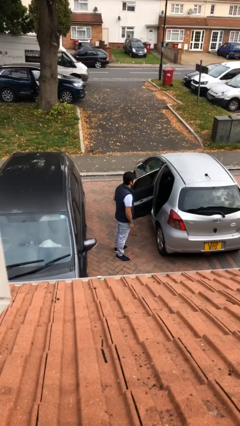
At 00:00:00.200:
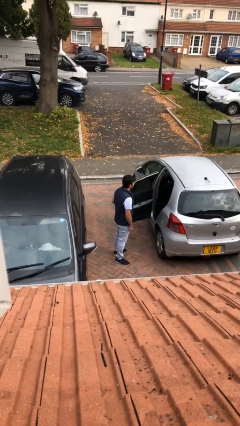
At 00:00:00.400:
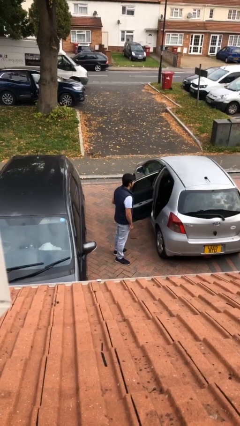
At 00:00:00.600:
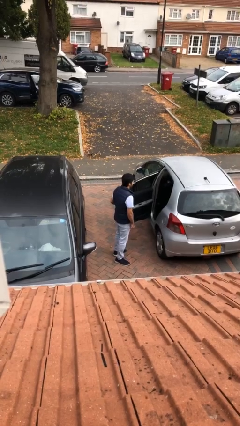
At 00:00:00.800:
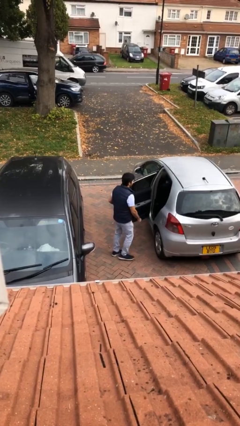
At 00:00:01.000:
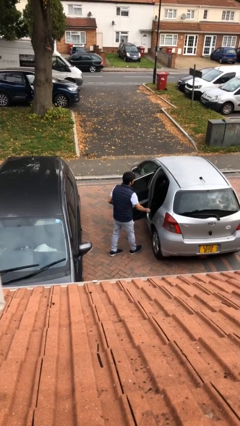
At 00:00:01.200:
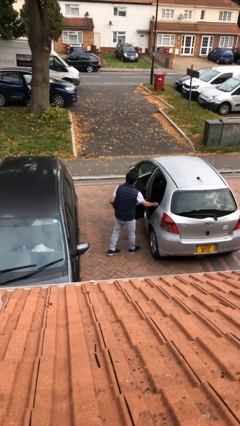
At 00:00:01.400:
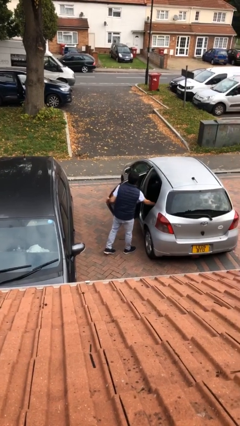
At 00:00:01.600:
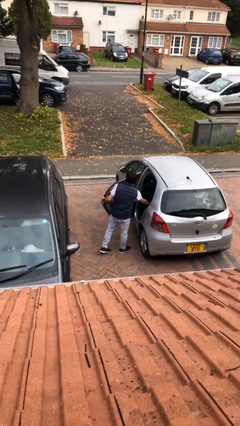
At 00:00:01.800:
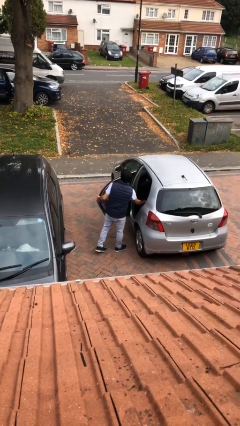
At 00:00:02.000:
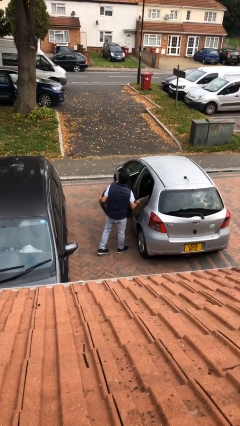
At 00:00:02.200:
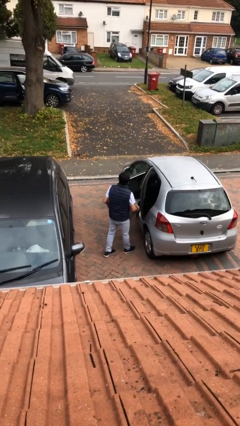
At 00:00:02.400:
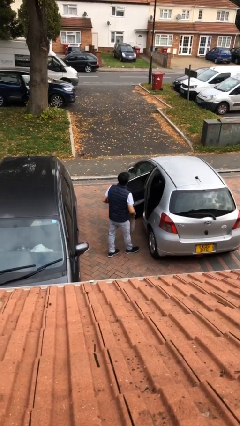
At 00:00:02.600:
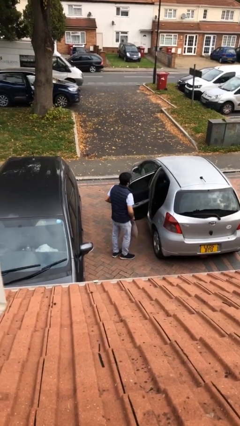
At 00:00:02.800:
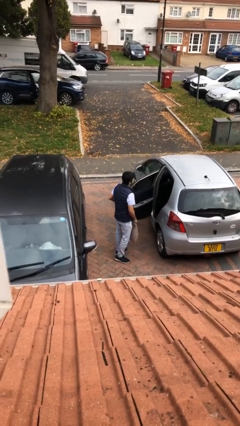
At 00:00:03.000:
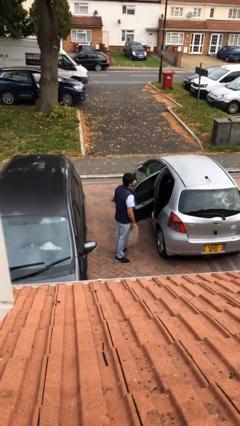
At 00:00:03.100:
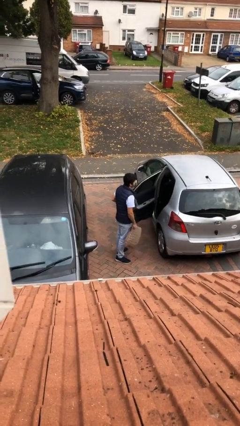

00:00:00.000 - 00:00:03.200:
person unloads car

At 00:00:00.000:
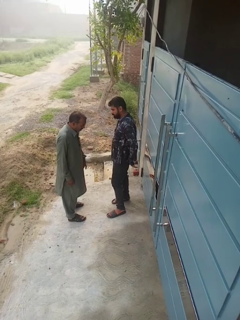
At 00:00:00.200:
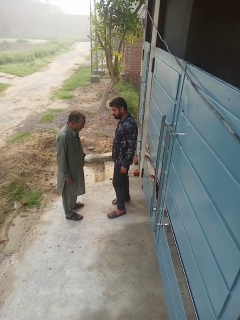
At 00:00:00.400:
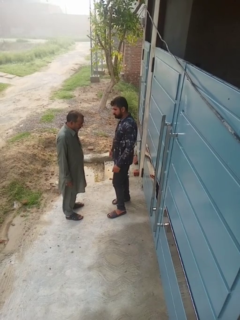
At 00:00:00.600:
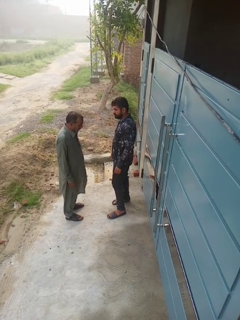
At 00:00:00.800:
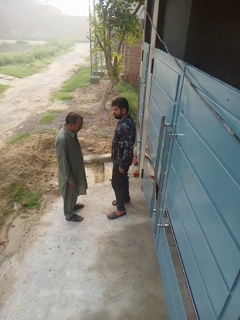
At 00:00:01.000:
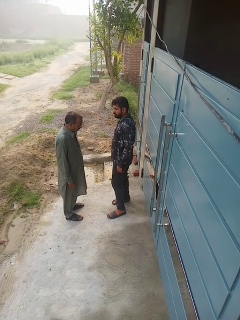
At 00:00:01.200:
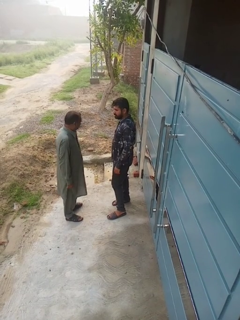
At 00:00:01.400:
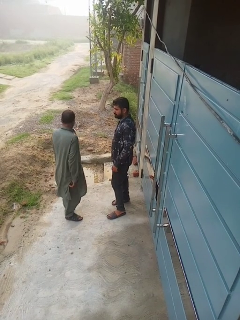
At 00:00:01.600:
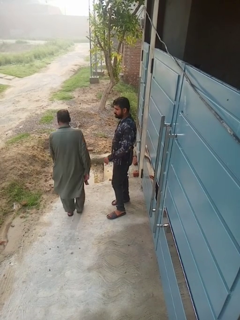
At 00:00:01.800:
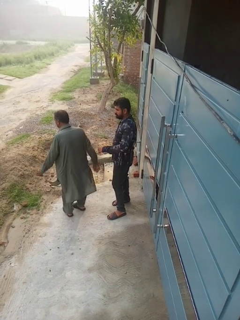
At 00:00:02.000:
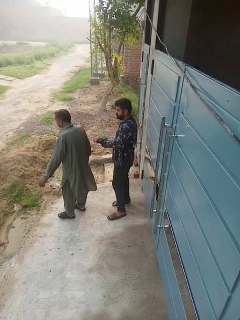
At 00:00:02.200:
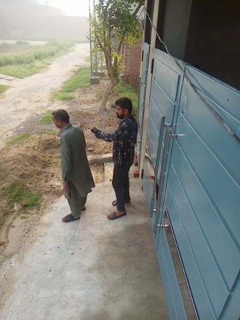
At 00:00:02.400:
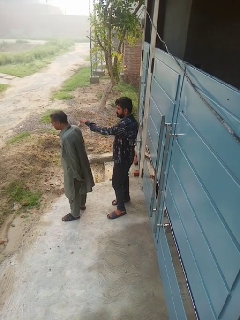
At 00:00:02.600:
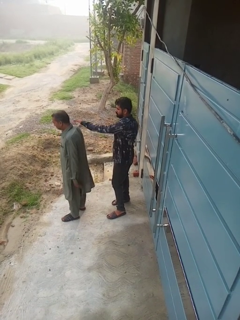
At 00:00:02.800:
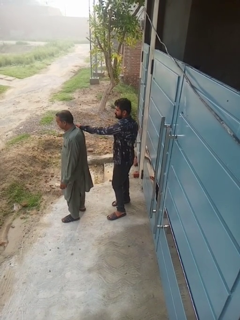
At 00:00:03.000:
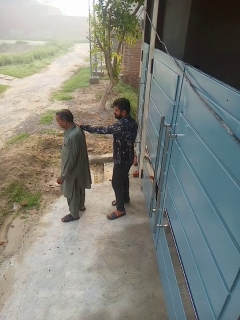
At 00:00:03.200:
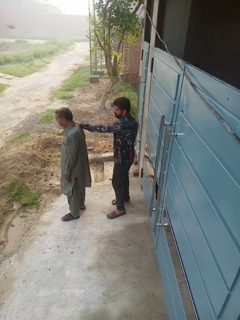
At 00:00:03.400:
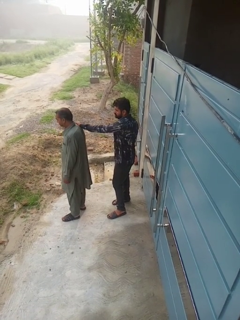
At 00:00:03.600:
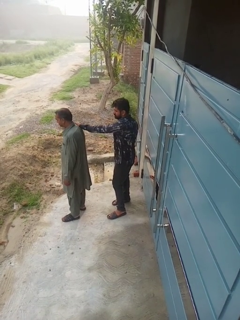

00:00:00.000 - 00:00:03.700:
person grabs person by shoulder

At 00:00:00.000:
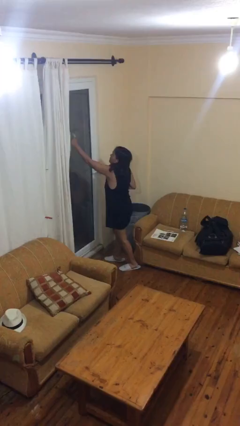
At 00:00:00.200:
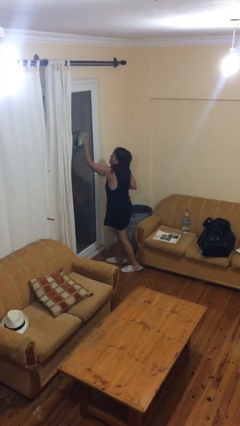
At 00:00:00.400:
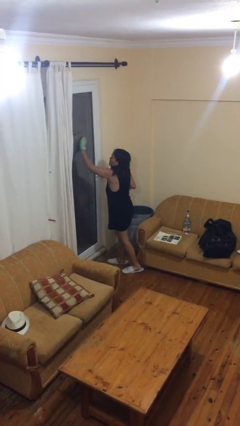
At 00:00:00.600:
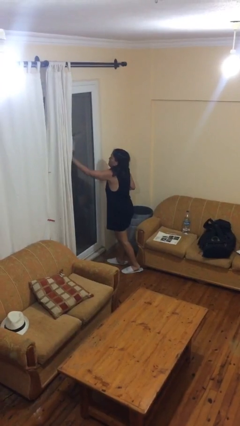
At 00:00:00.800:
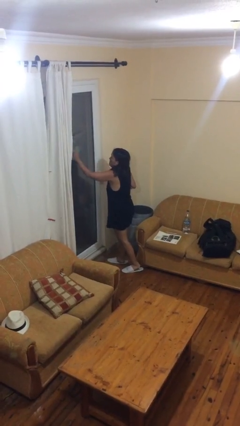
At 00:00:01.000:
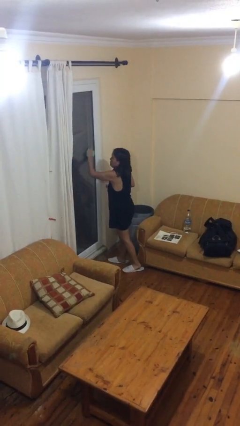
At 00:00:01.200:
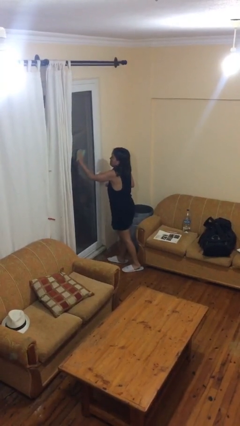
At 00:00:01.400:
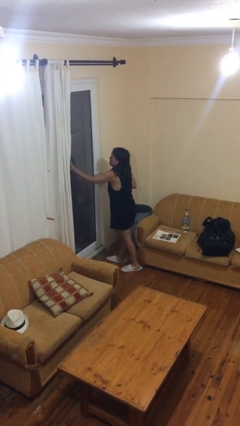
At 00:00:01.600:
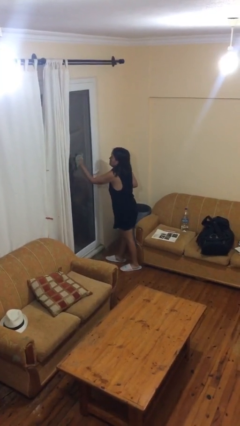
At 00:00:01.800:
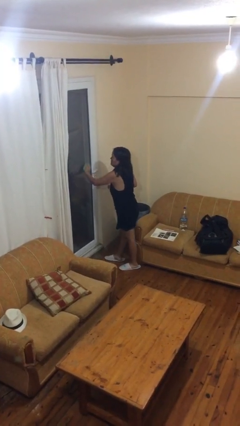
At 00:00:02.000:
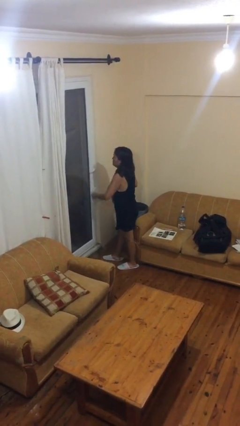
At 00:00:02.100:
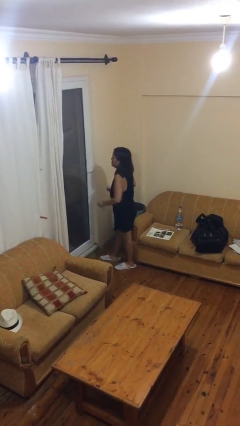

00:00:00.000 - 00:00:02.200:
person washes window

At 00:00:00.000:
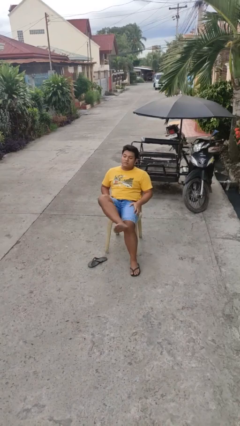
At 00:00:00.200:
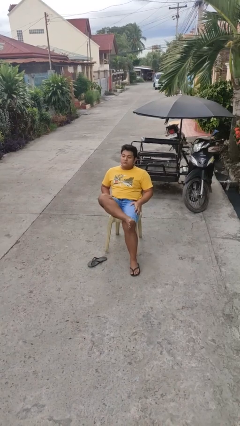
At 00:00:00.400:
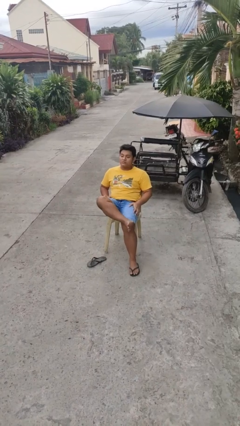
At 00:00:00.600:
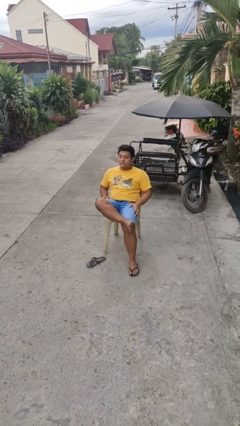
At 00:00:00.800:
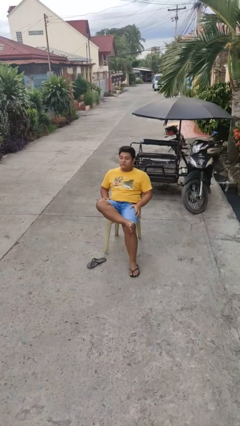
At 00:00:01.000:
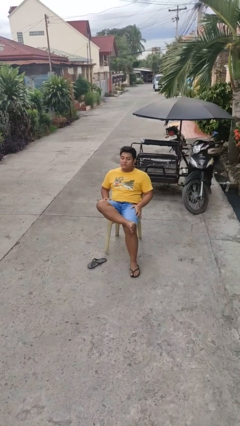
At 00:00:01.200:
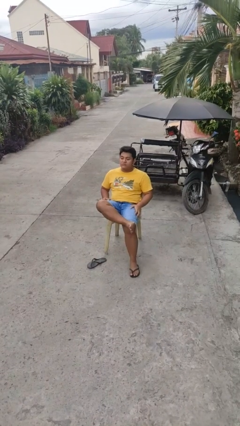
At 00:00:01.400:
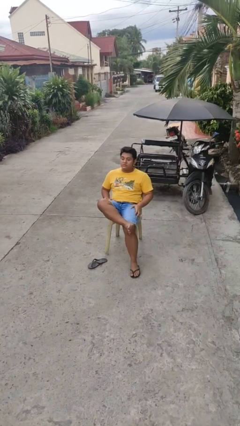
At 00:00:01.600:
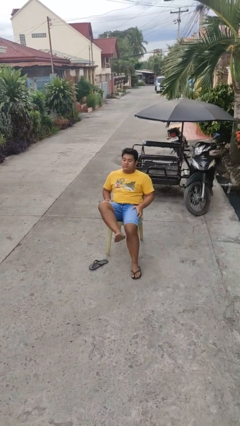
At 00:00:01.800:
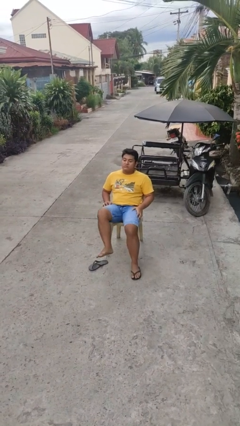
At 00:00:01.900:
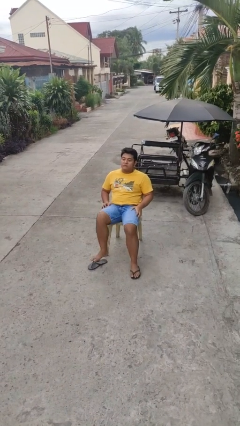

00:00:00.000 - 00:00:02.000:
person crosses legs

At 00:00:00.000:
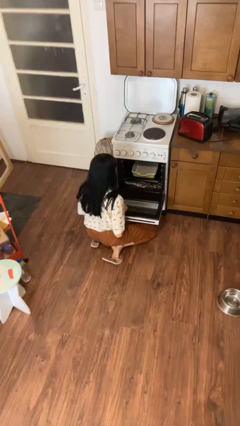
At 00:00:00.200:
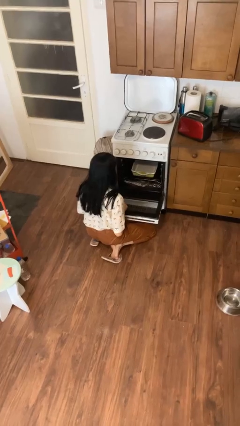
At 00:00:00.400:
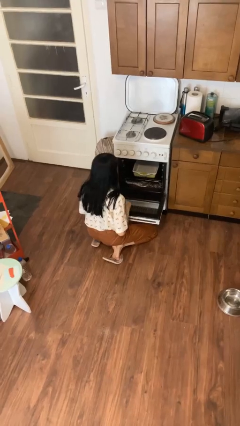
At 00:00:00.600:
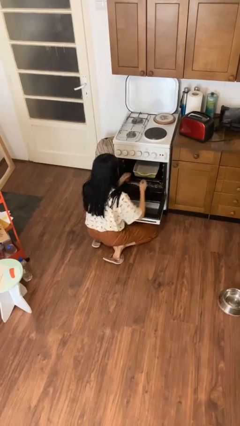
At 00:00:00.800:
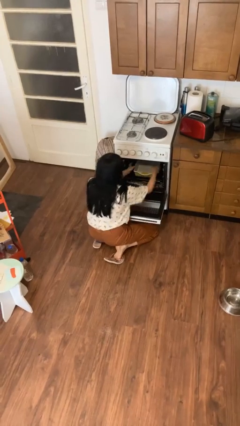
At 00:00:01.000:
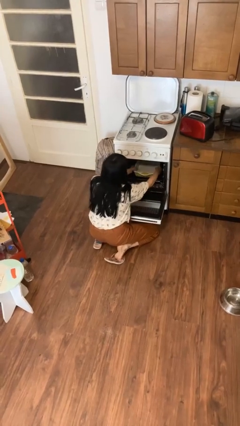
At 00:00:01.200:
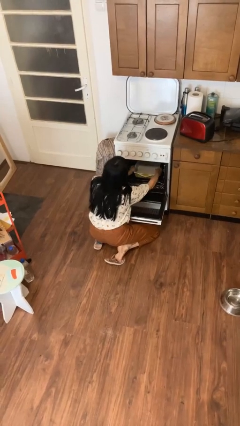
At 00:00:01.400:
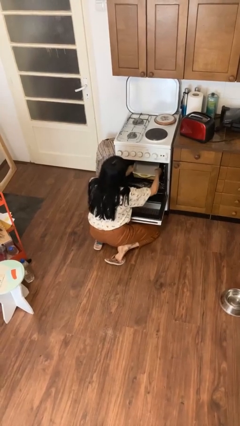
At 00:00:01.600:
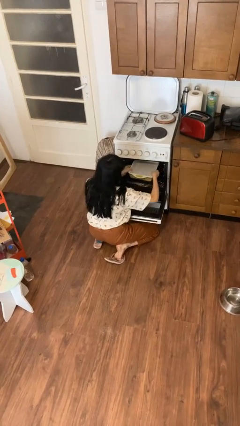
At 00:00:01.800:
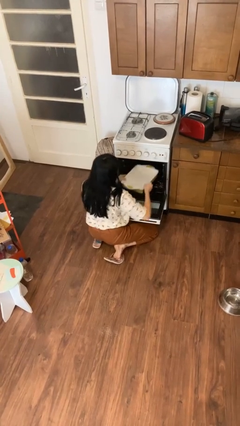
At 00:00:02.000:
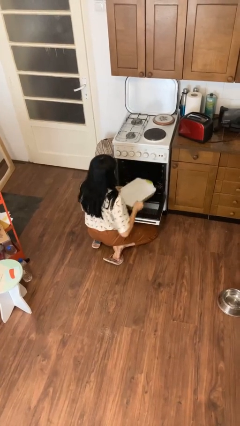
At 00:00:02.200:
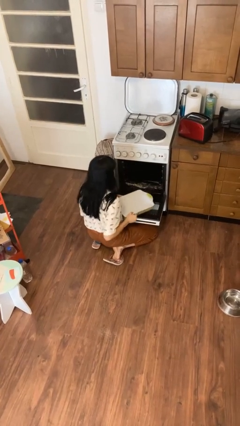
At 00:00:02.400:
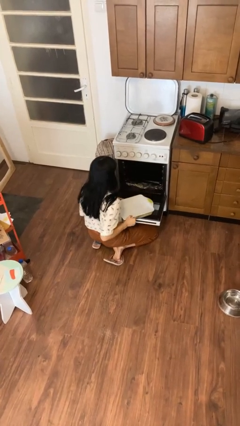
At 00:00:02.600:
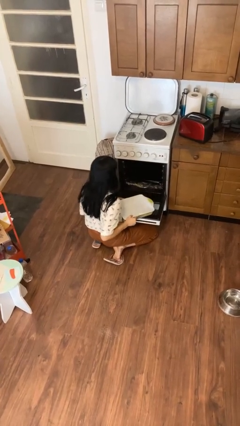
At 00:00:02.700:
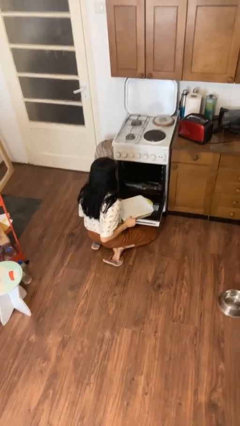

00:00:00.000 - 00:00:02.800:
person takes object from oven

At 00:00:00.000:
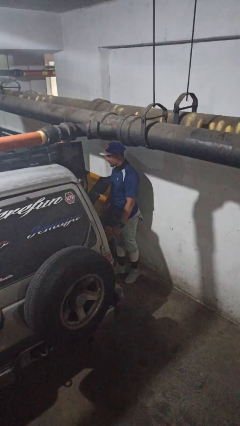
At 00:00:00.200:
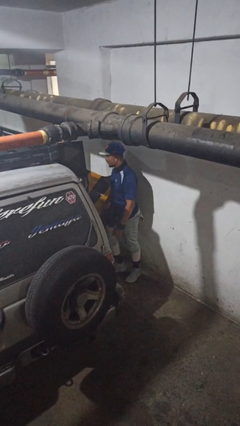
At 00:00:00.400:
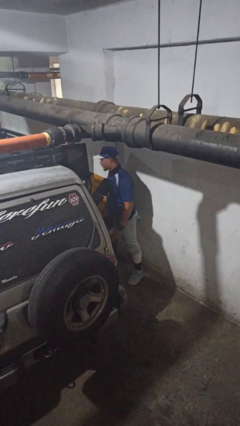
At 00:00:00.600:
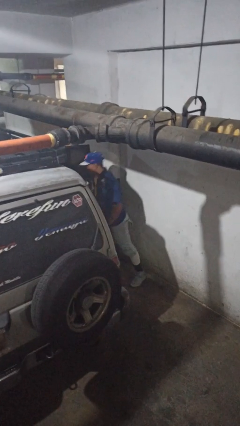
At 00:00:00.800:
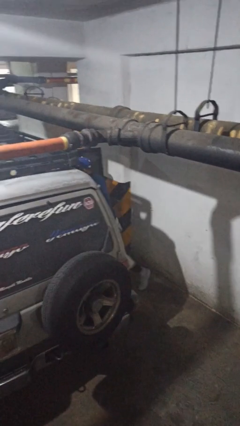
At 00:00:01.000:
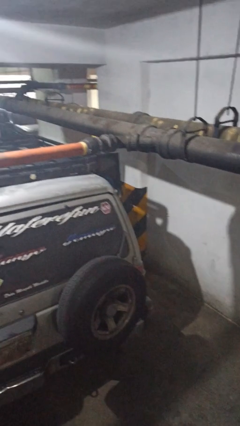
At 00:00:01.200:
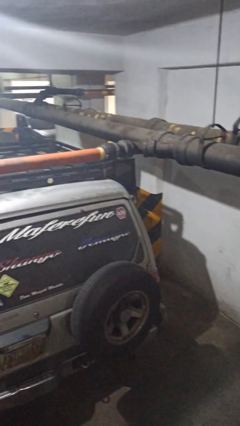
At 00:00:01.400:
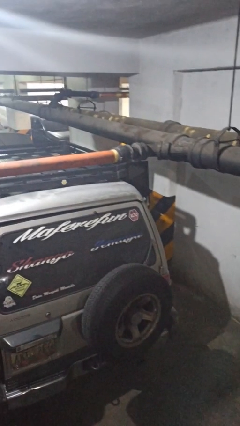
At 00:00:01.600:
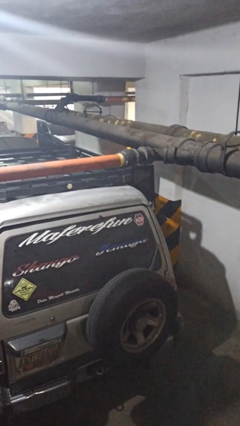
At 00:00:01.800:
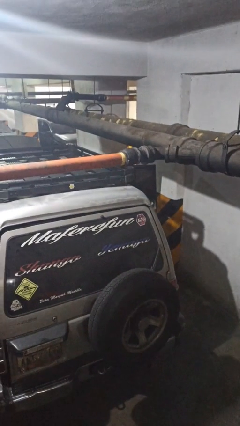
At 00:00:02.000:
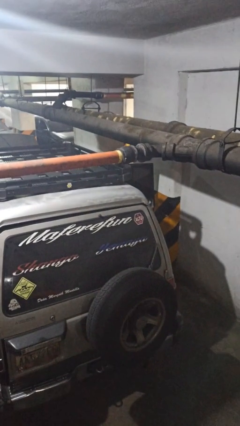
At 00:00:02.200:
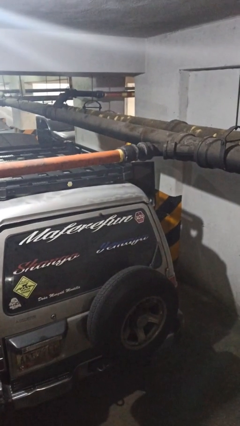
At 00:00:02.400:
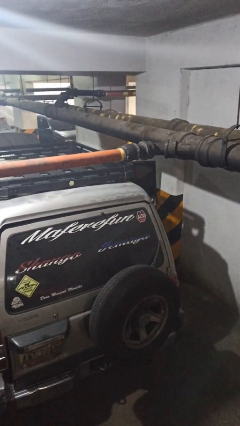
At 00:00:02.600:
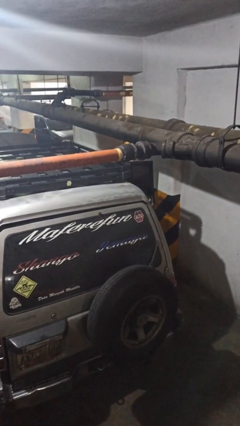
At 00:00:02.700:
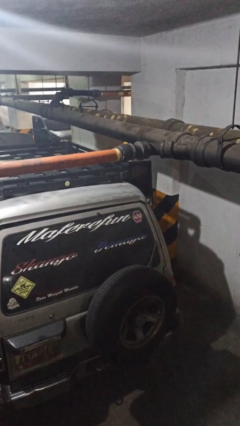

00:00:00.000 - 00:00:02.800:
person enters car

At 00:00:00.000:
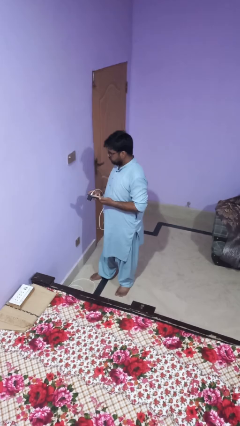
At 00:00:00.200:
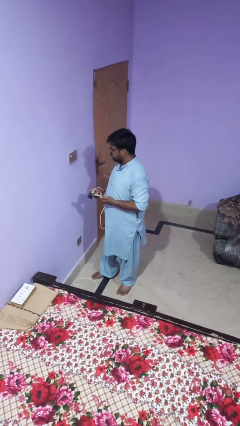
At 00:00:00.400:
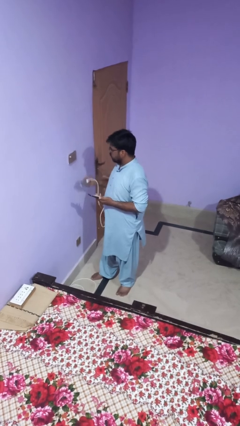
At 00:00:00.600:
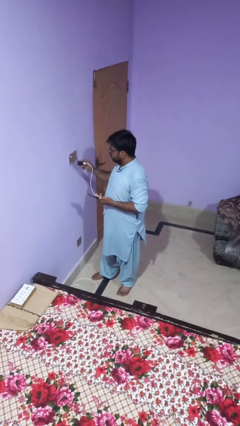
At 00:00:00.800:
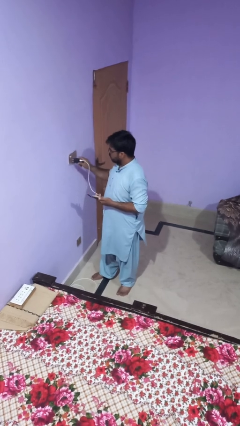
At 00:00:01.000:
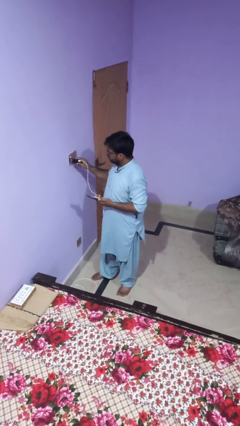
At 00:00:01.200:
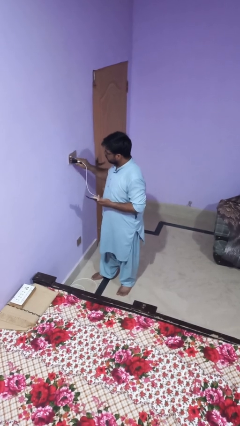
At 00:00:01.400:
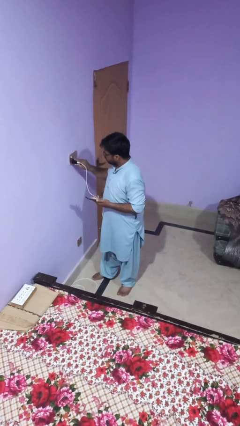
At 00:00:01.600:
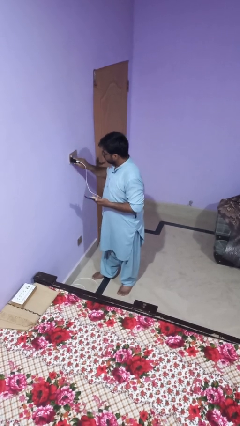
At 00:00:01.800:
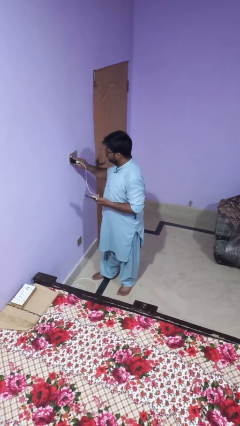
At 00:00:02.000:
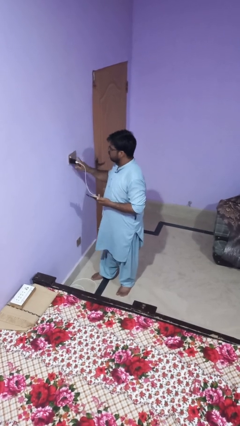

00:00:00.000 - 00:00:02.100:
person plugs into electrical socket
